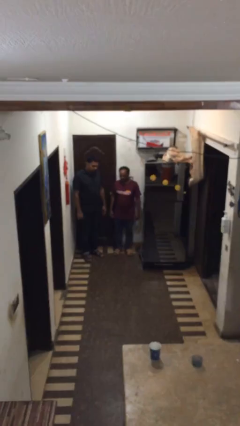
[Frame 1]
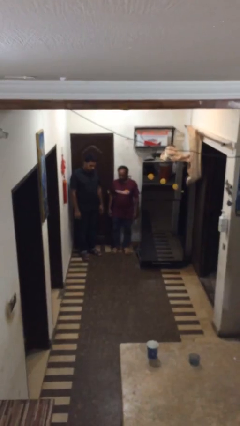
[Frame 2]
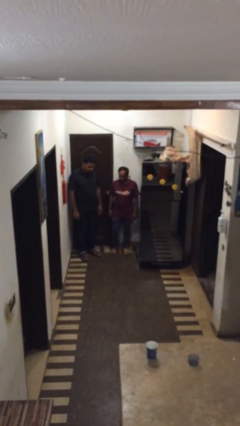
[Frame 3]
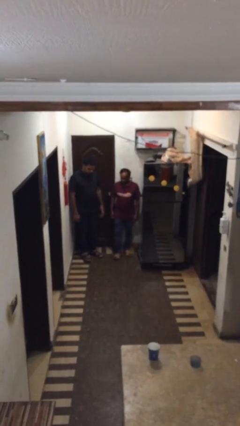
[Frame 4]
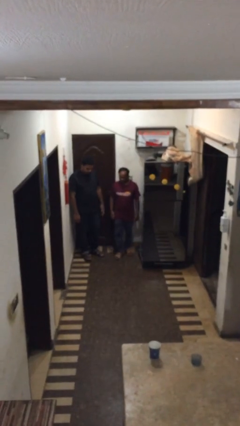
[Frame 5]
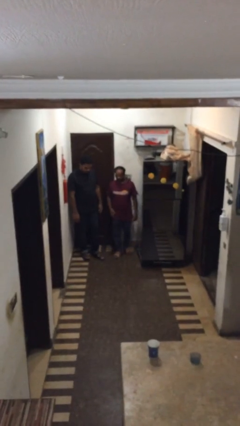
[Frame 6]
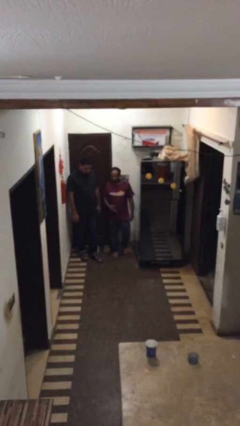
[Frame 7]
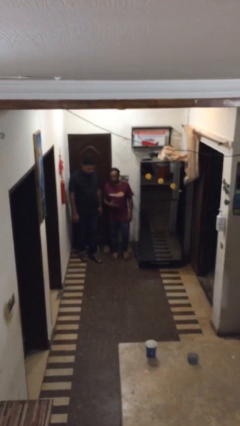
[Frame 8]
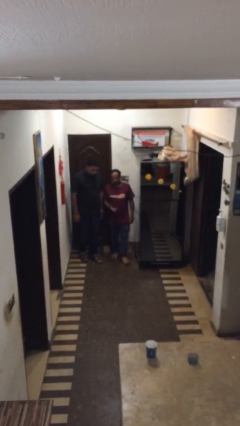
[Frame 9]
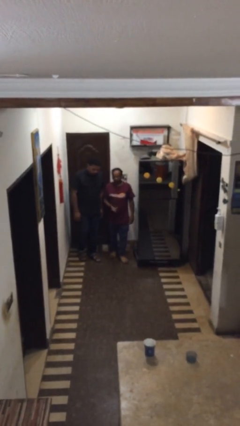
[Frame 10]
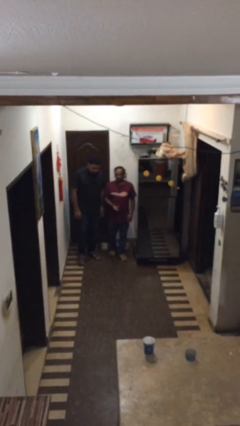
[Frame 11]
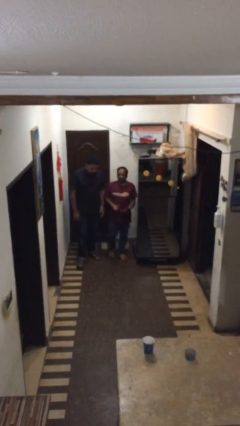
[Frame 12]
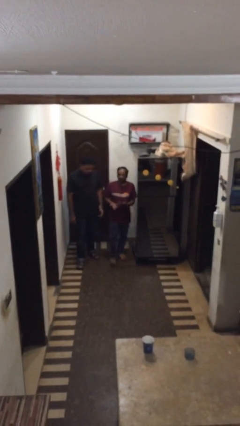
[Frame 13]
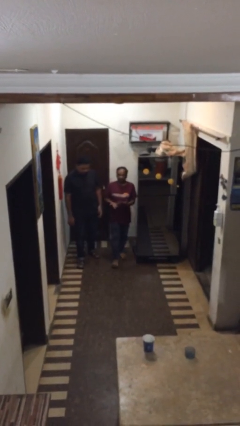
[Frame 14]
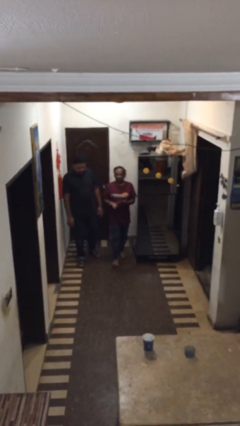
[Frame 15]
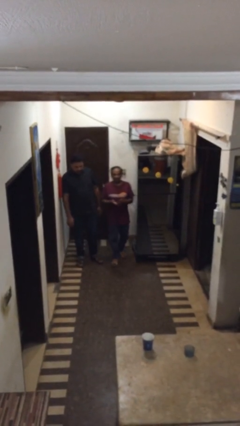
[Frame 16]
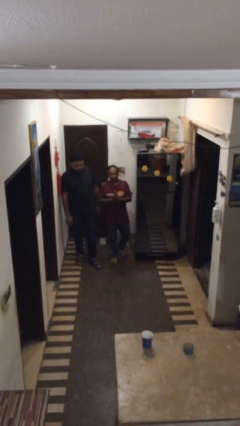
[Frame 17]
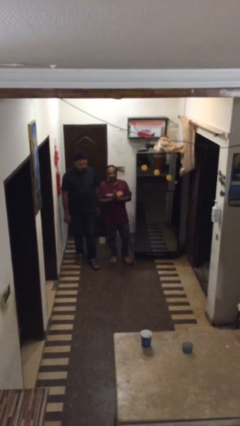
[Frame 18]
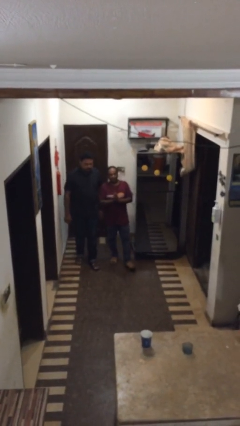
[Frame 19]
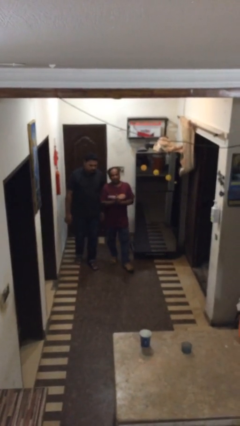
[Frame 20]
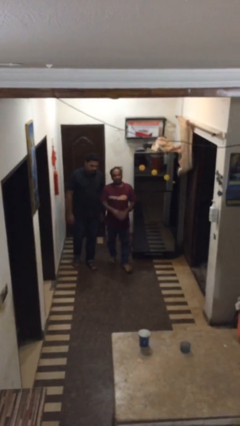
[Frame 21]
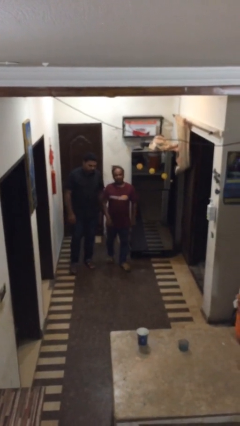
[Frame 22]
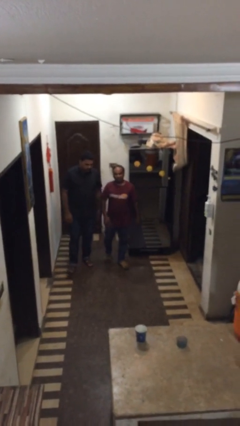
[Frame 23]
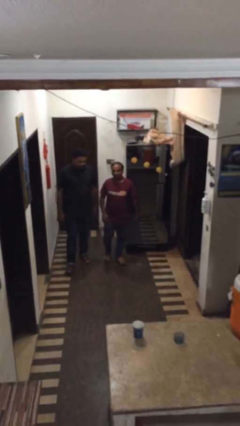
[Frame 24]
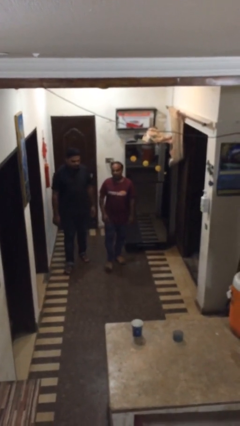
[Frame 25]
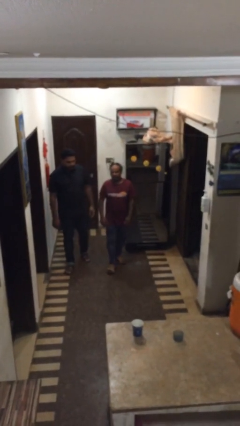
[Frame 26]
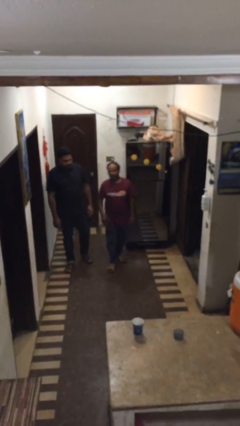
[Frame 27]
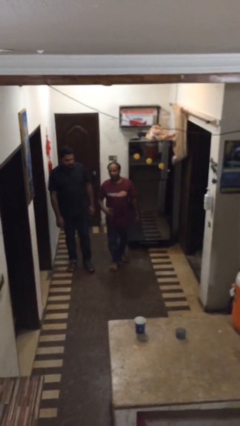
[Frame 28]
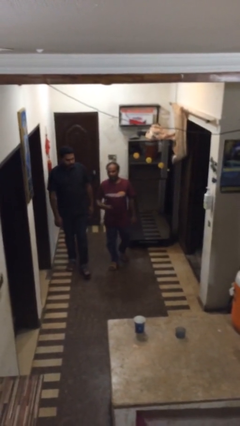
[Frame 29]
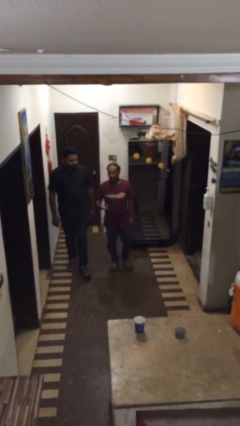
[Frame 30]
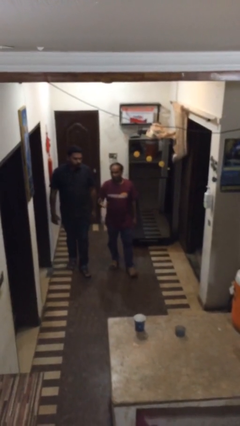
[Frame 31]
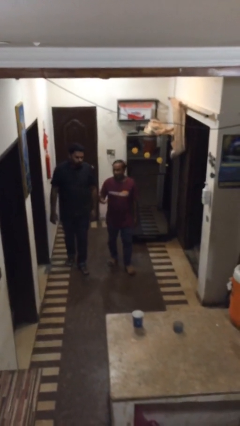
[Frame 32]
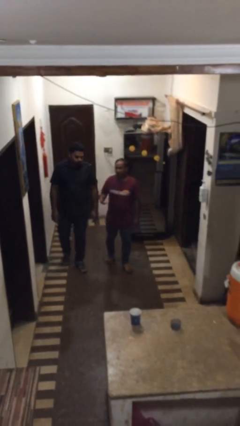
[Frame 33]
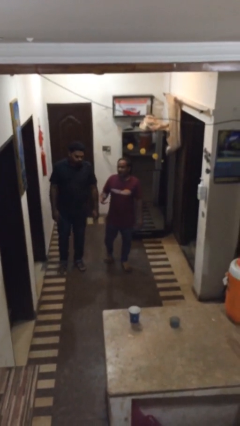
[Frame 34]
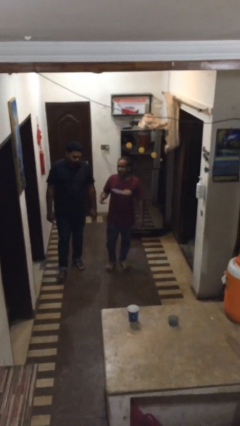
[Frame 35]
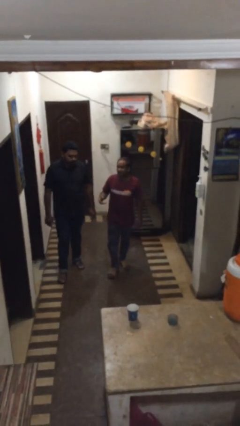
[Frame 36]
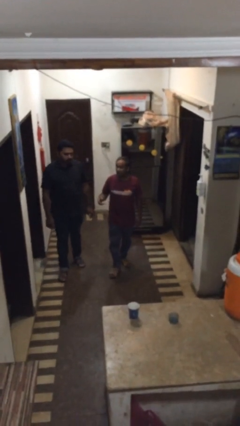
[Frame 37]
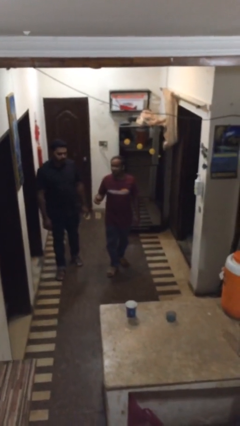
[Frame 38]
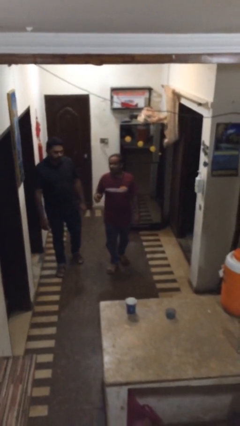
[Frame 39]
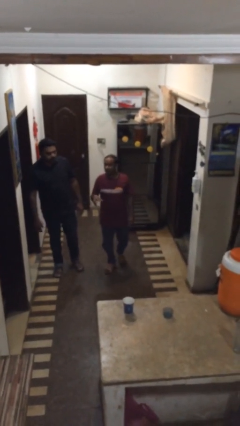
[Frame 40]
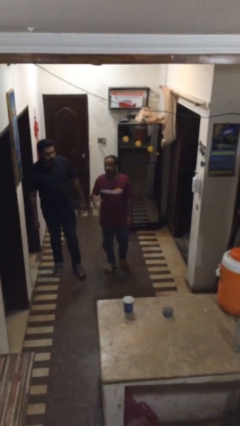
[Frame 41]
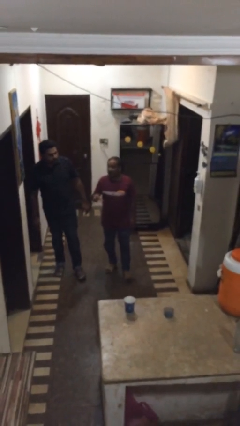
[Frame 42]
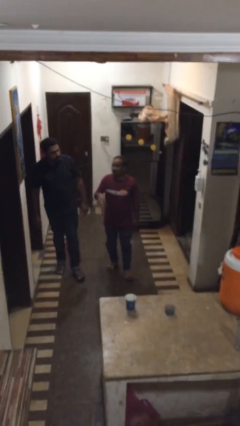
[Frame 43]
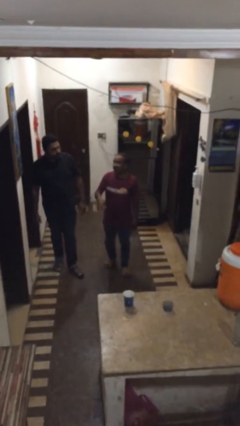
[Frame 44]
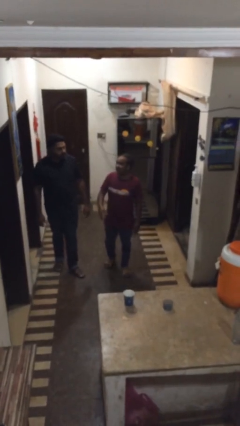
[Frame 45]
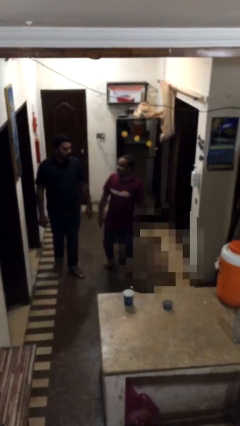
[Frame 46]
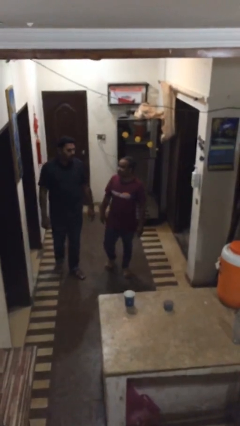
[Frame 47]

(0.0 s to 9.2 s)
person talks to person

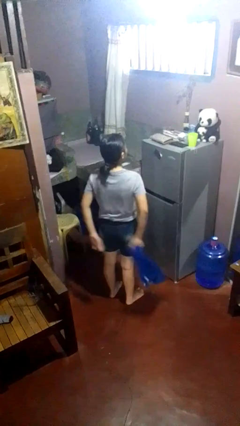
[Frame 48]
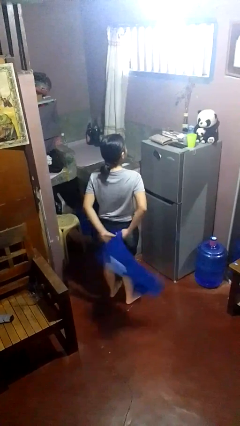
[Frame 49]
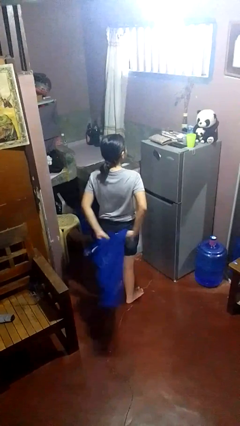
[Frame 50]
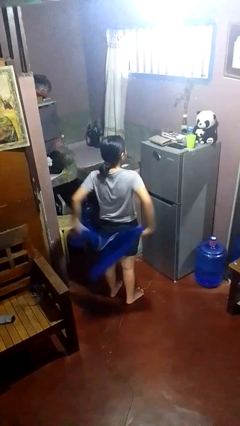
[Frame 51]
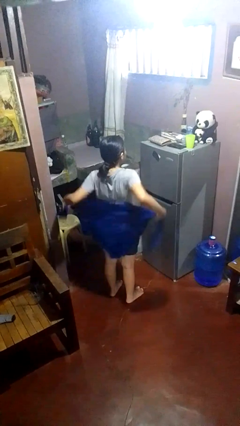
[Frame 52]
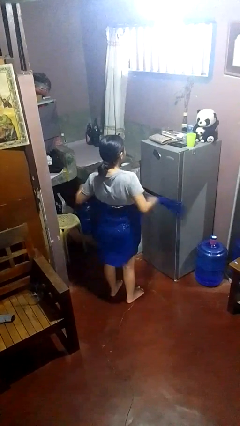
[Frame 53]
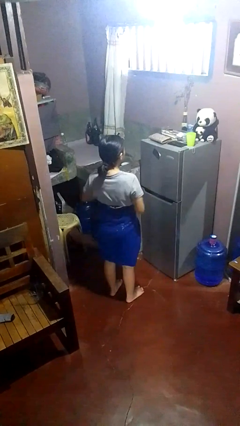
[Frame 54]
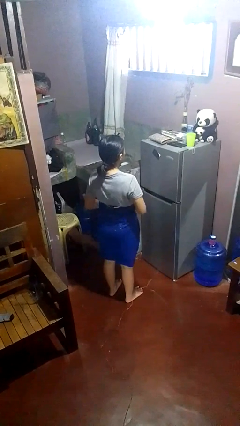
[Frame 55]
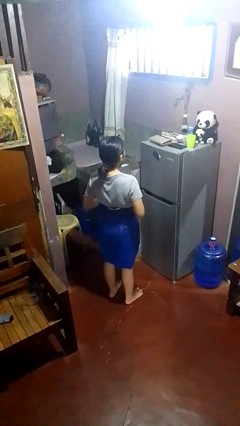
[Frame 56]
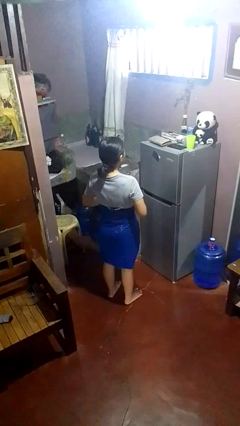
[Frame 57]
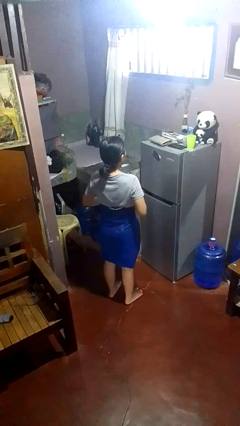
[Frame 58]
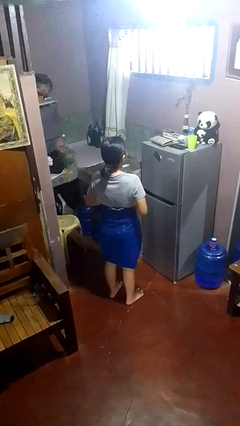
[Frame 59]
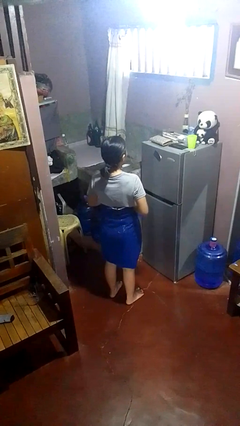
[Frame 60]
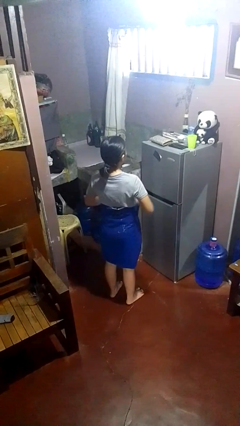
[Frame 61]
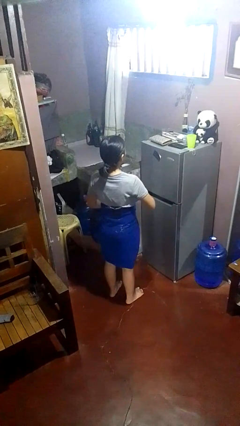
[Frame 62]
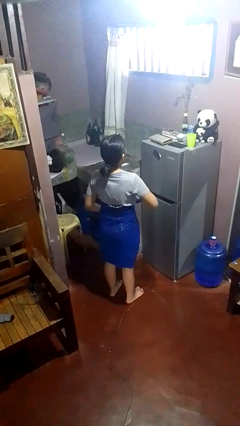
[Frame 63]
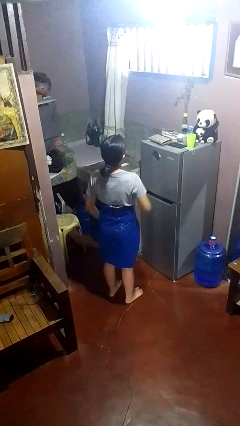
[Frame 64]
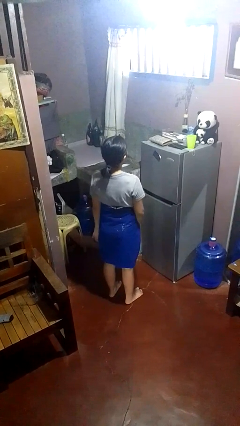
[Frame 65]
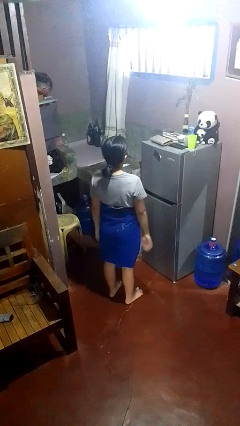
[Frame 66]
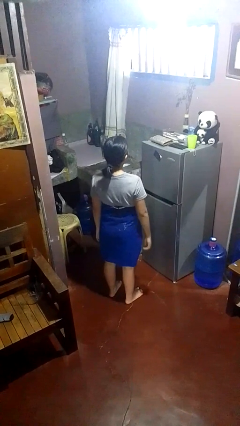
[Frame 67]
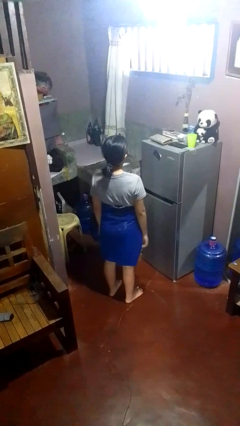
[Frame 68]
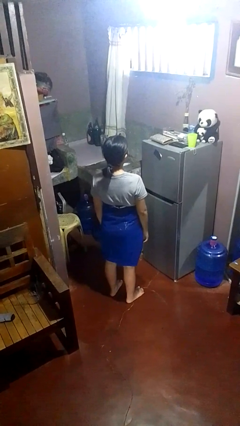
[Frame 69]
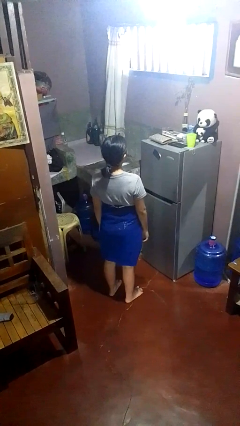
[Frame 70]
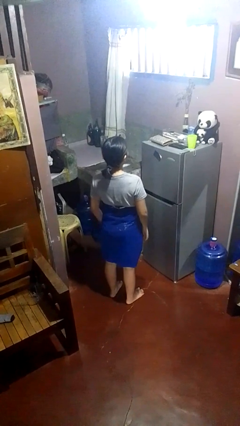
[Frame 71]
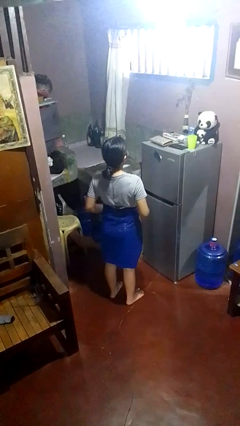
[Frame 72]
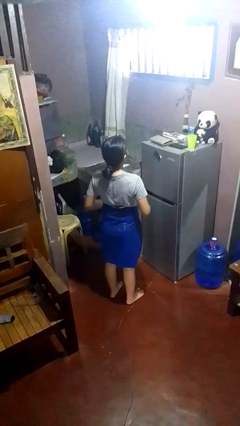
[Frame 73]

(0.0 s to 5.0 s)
person ties jacket around waist

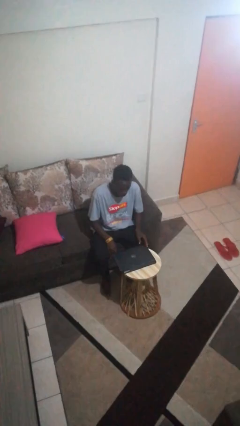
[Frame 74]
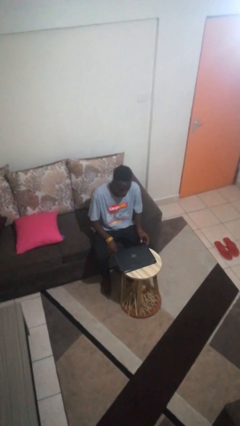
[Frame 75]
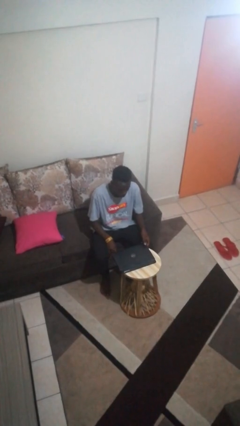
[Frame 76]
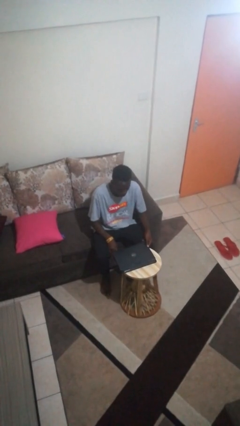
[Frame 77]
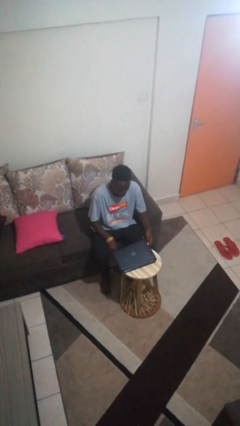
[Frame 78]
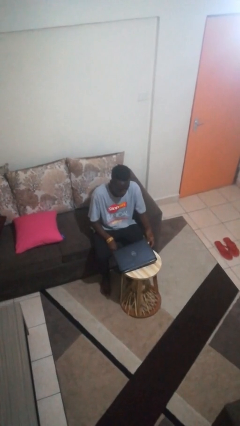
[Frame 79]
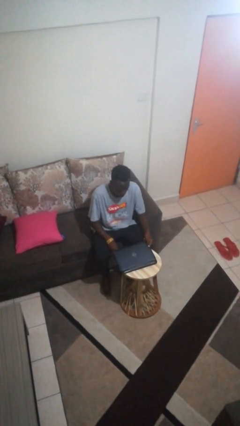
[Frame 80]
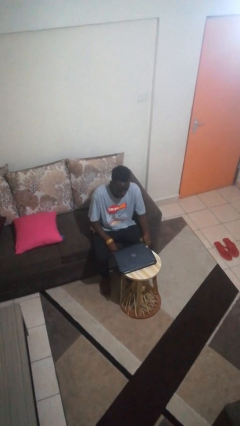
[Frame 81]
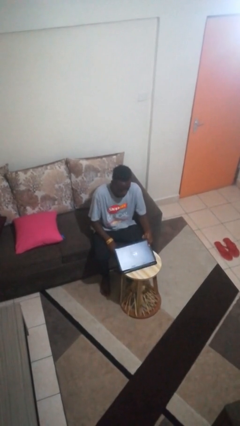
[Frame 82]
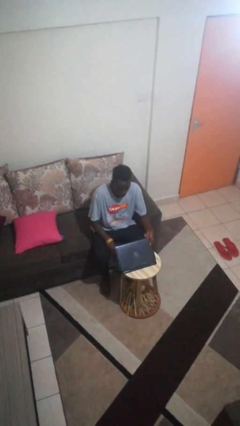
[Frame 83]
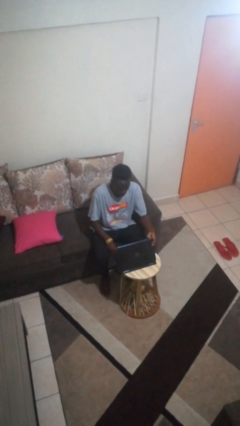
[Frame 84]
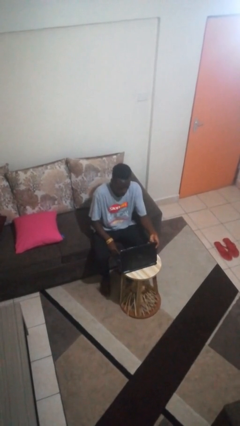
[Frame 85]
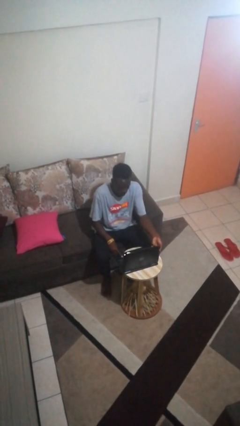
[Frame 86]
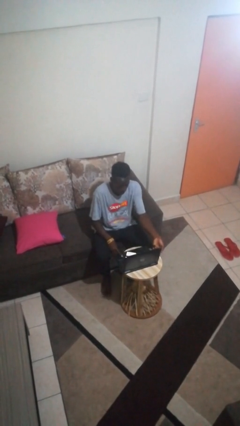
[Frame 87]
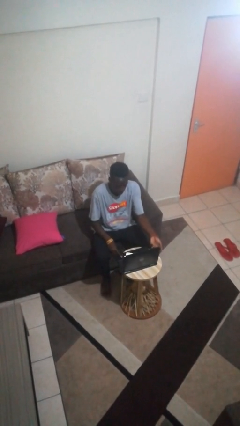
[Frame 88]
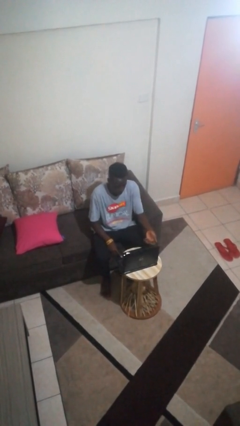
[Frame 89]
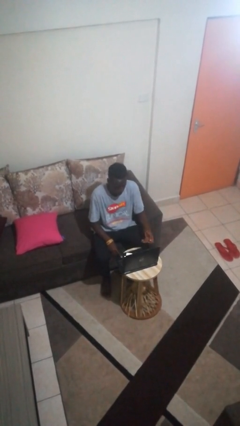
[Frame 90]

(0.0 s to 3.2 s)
person opens laptop
